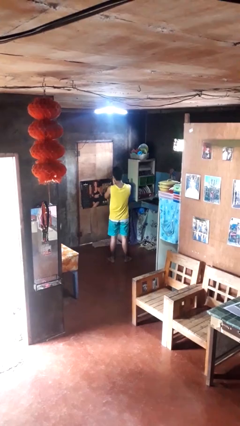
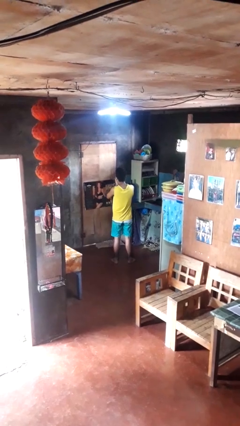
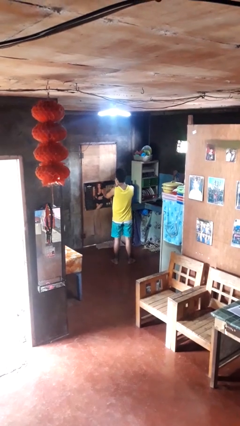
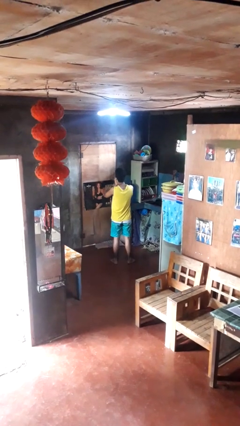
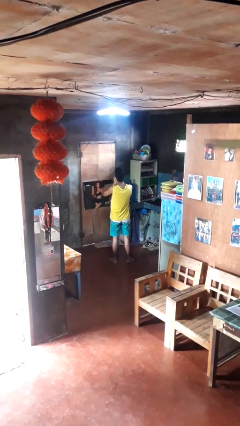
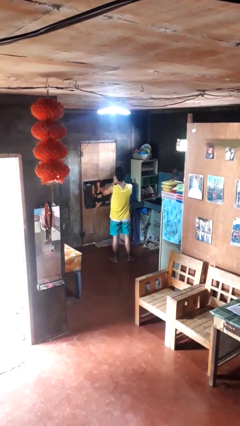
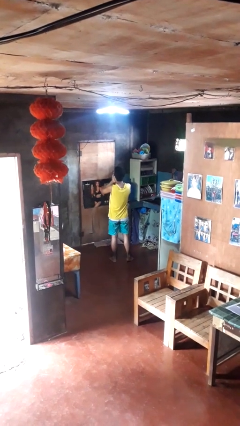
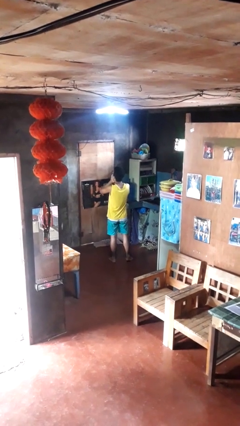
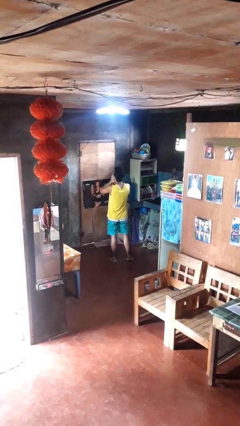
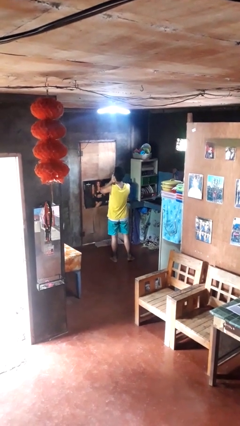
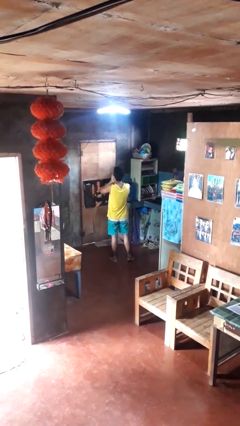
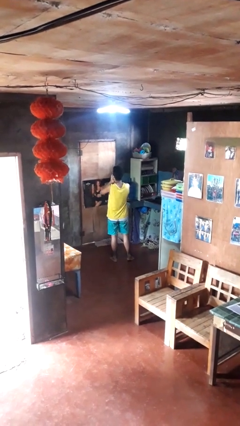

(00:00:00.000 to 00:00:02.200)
person yawns

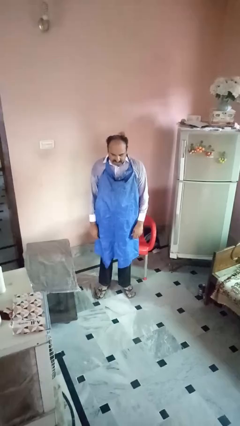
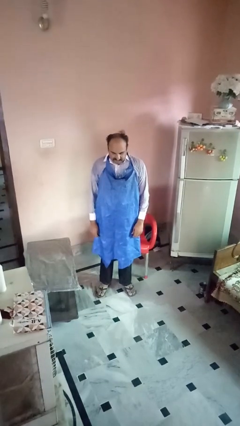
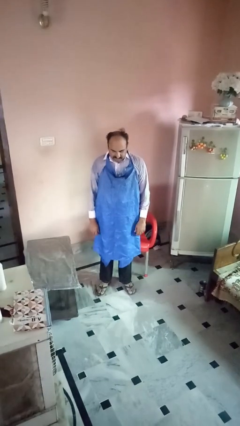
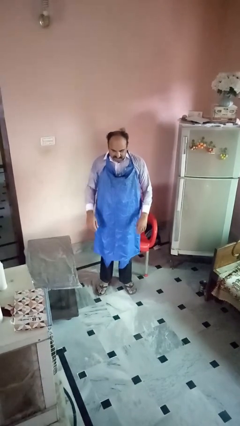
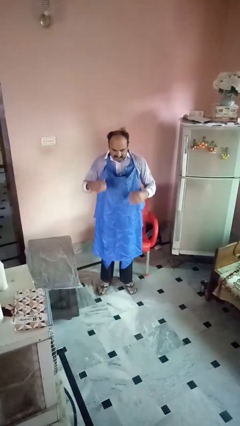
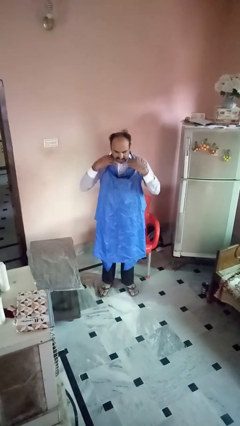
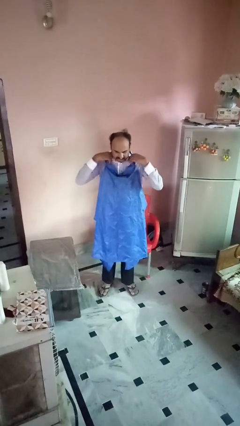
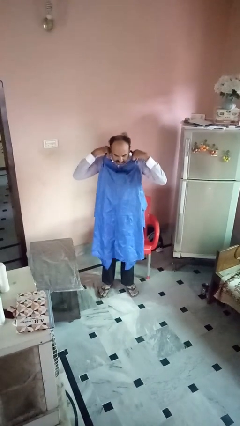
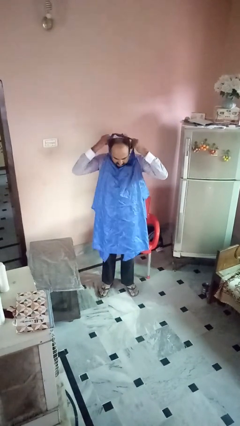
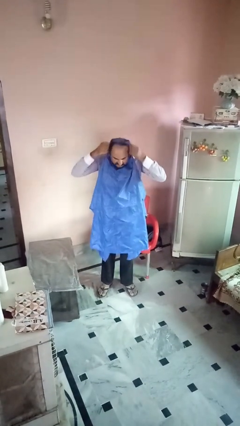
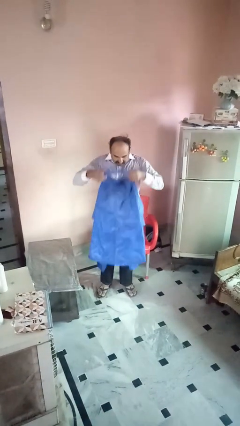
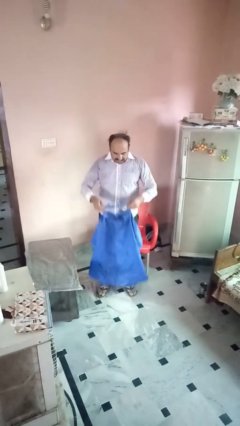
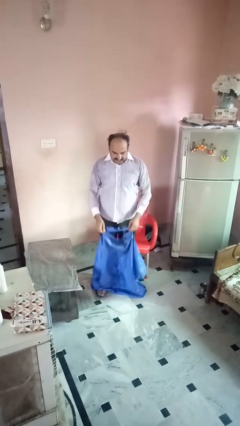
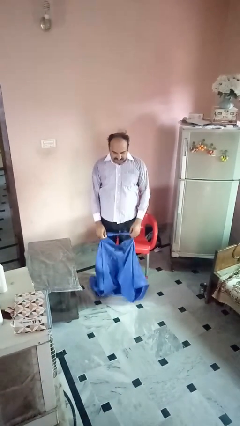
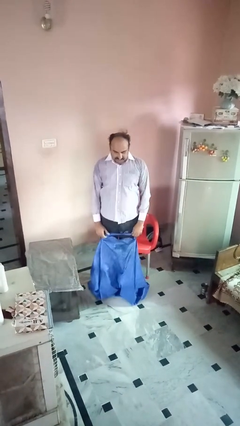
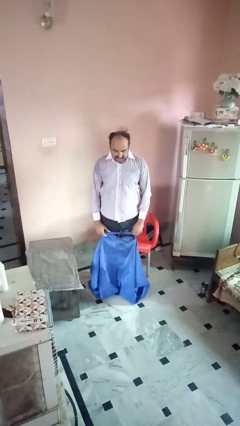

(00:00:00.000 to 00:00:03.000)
person takes off apron

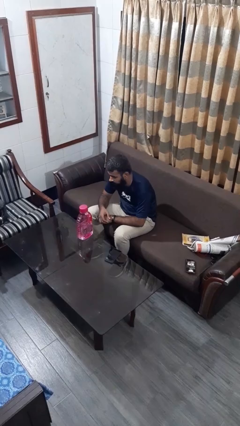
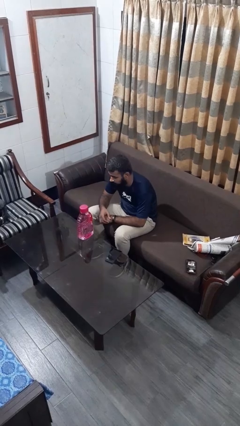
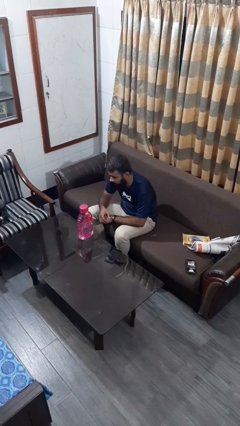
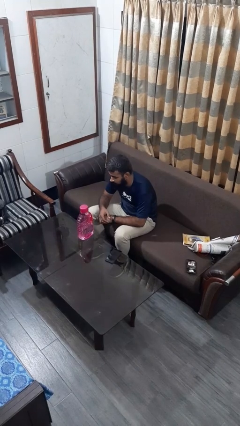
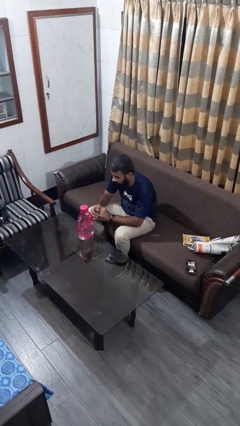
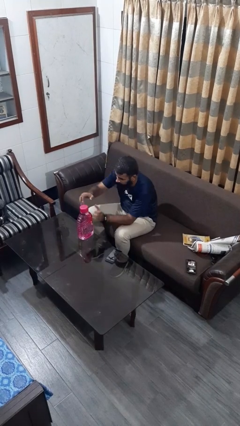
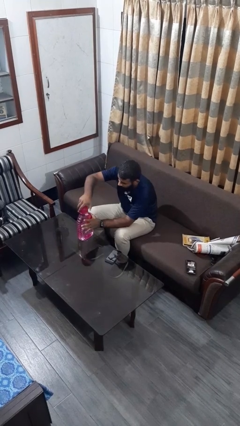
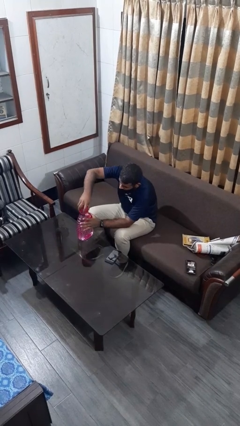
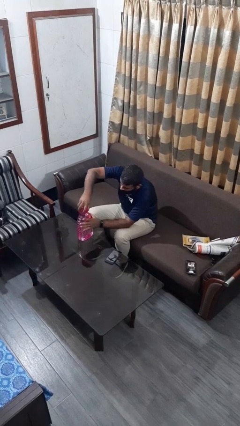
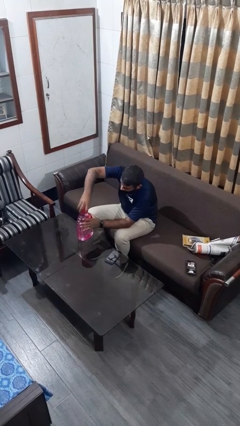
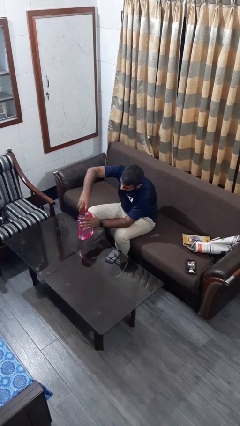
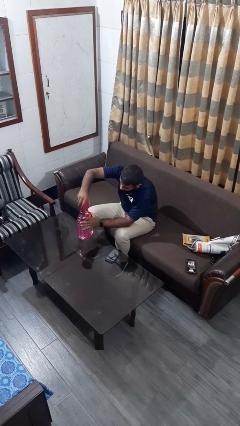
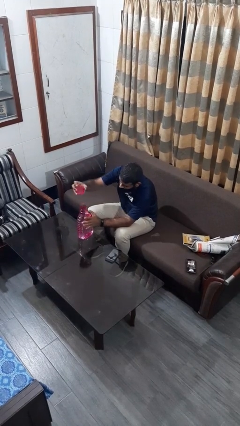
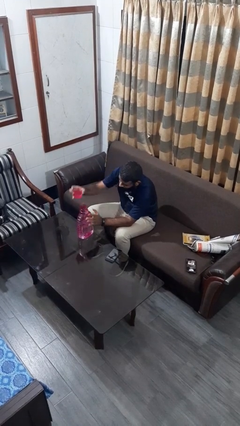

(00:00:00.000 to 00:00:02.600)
person unscrews lid from bottle

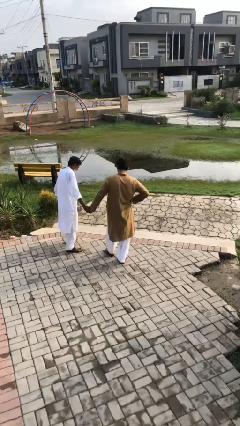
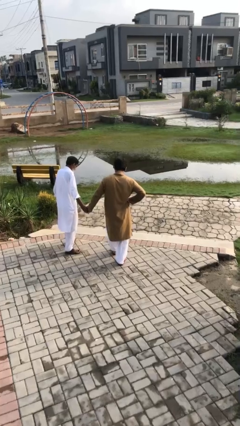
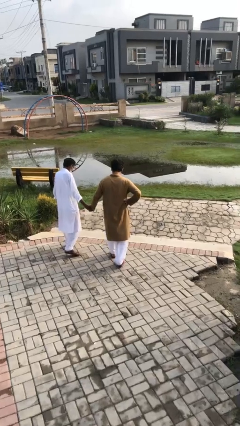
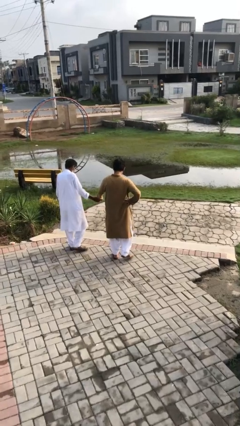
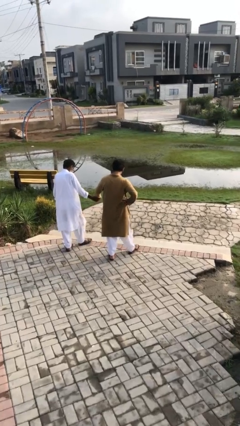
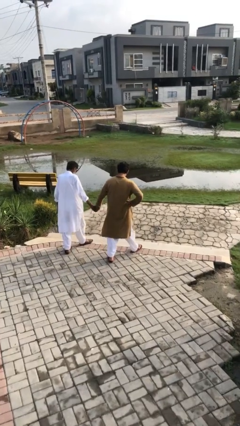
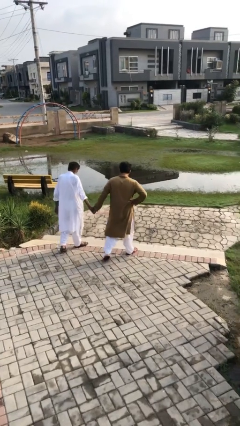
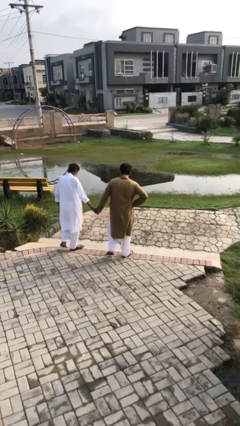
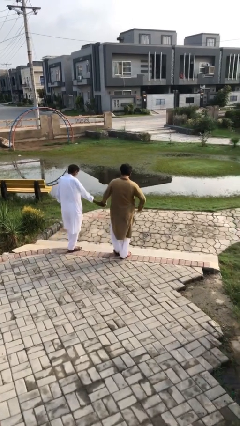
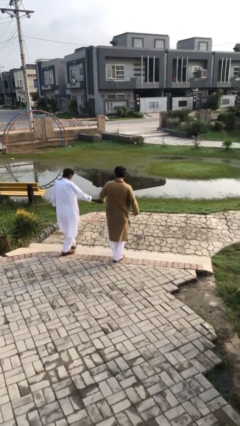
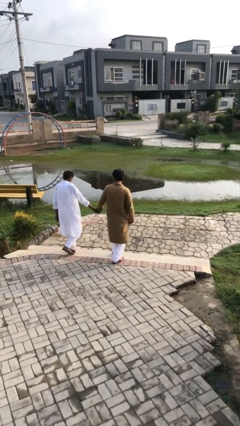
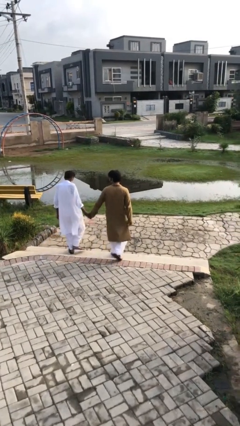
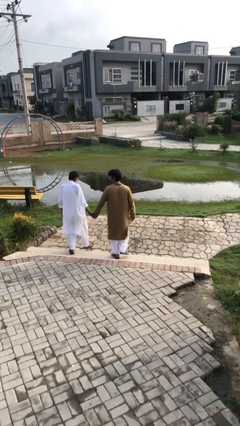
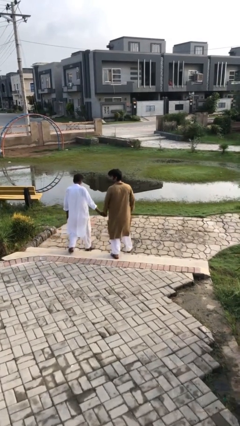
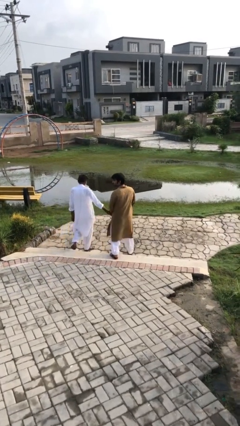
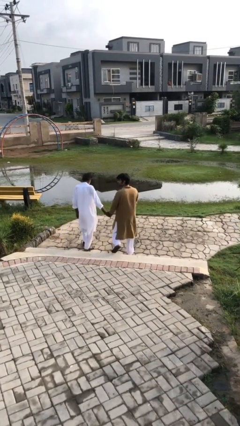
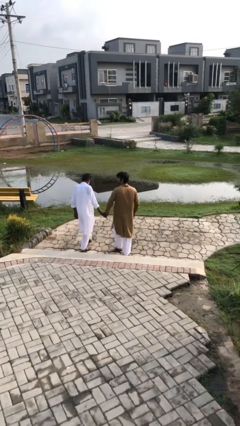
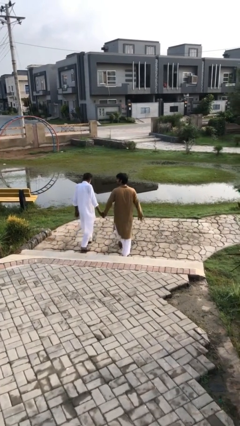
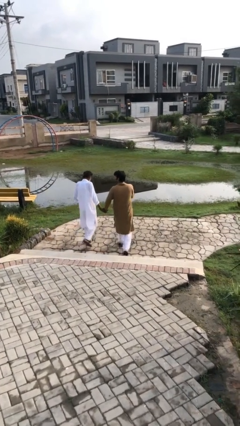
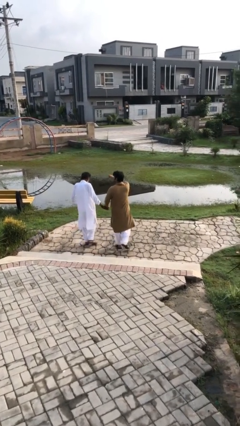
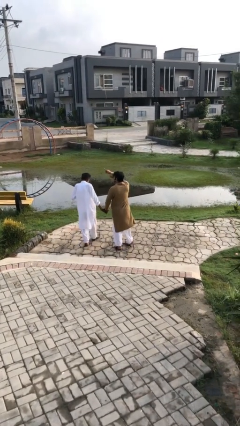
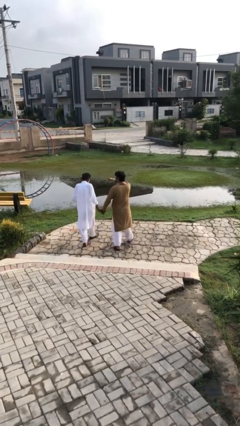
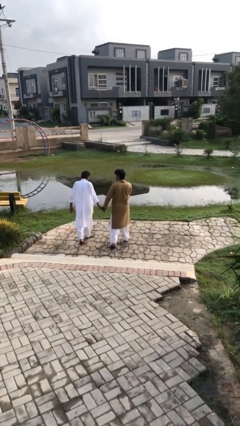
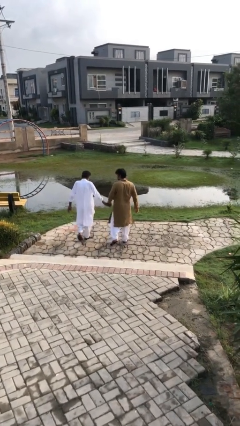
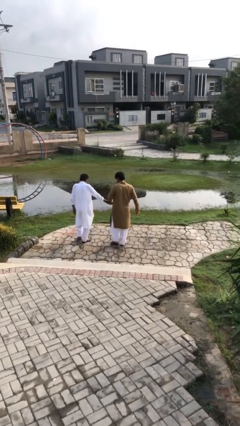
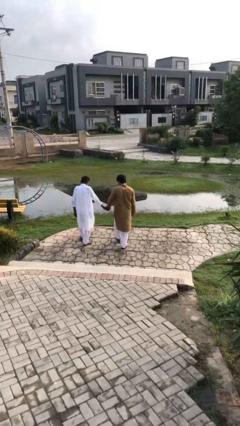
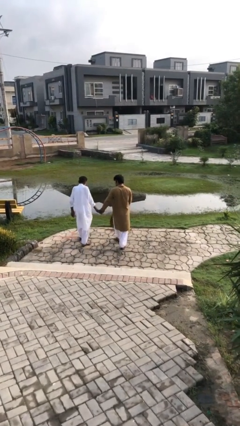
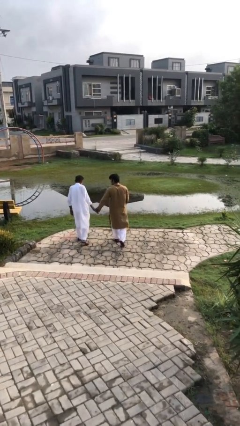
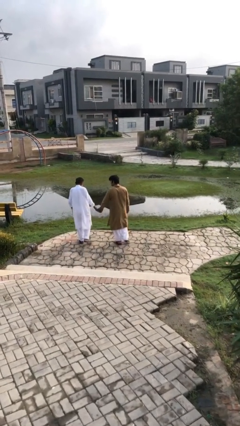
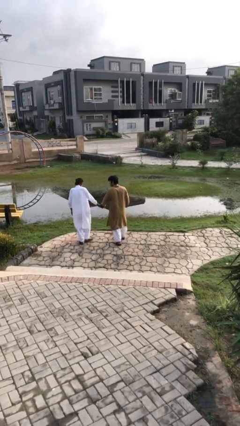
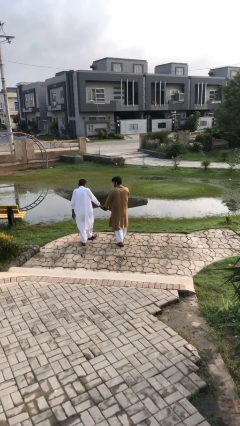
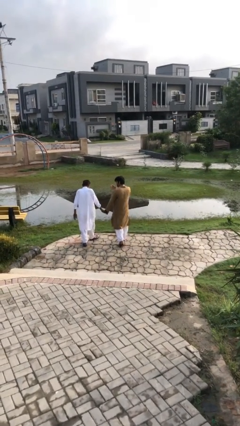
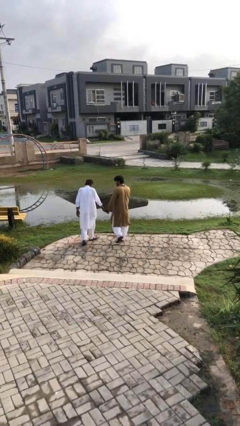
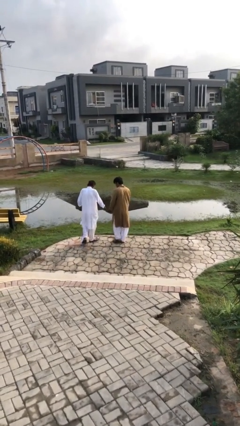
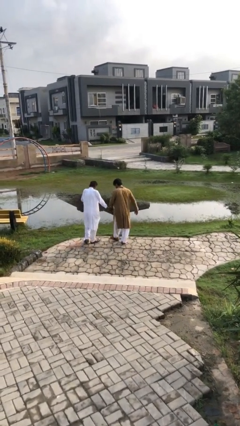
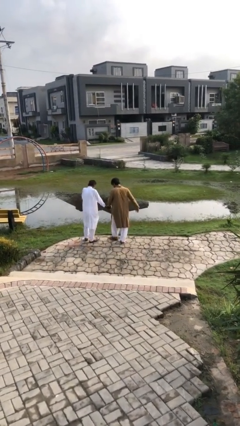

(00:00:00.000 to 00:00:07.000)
person holds hand

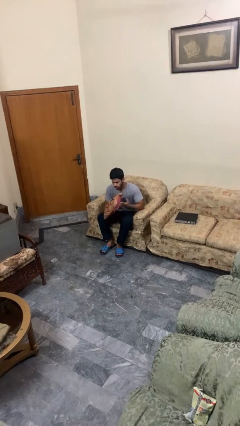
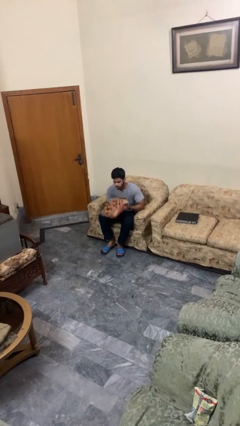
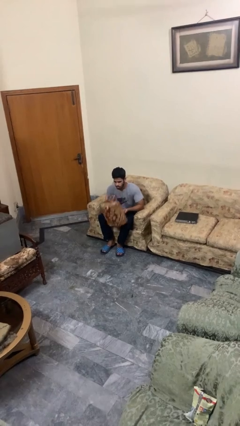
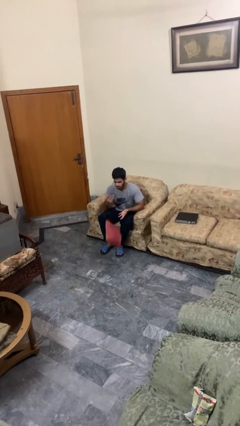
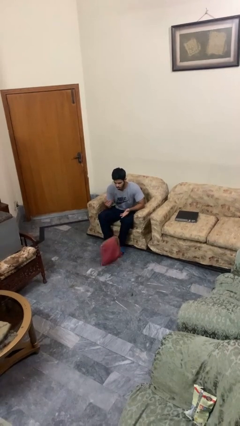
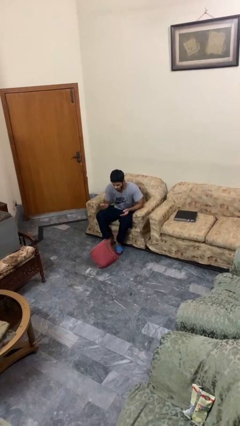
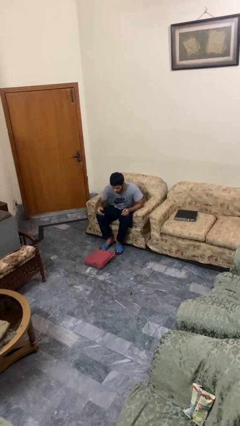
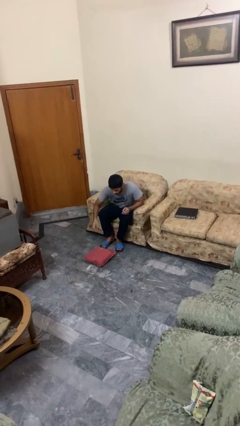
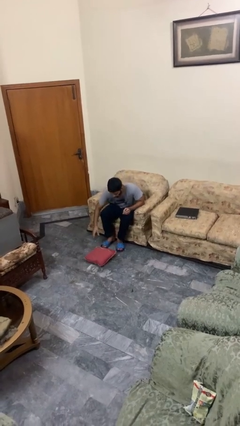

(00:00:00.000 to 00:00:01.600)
person drops object

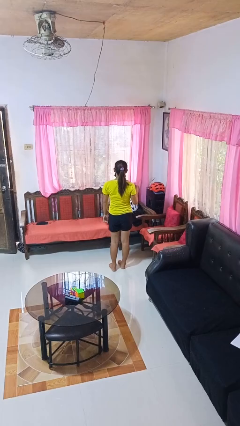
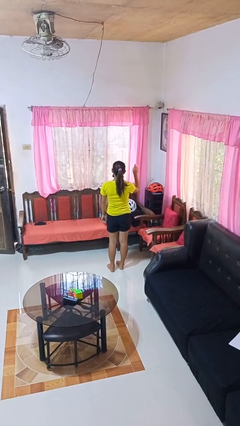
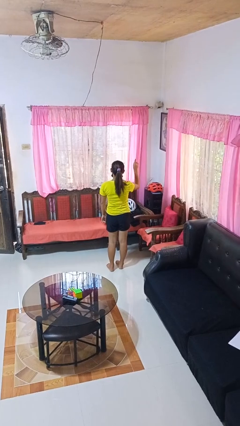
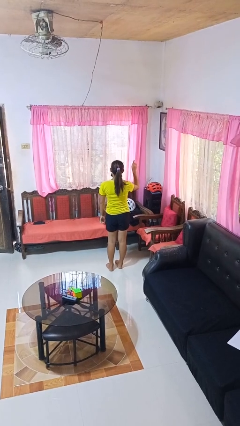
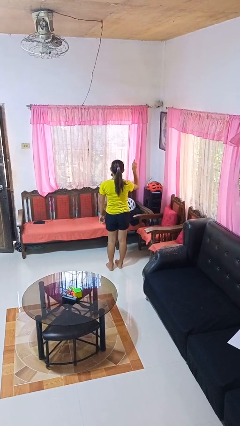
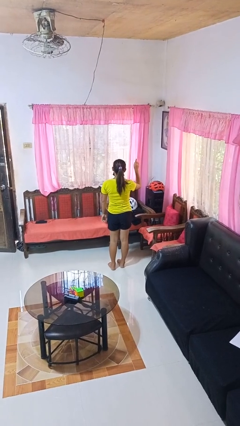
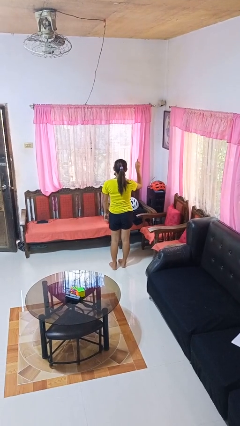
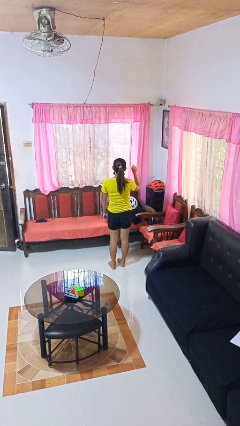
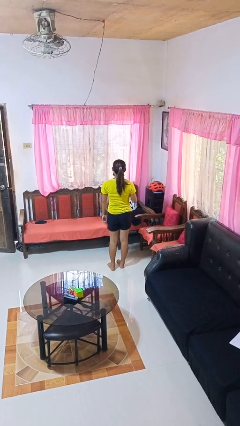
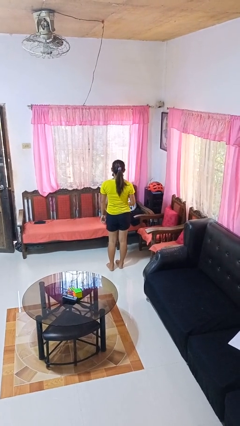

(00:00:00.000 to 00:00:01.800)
person gestures number one
